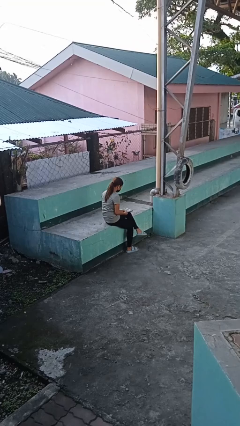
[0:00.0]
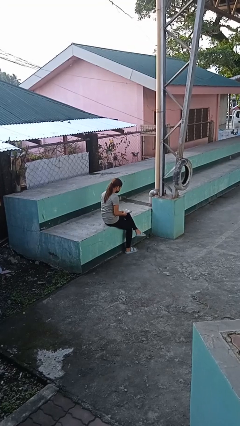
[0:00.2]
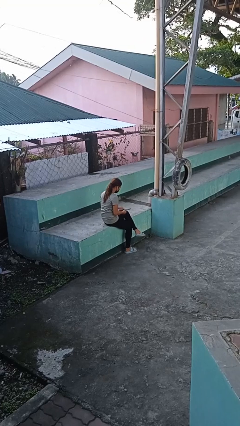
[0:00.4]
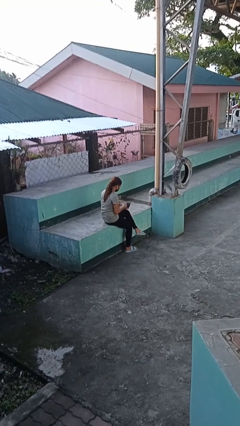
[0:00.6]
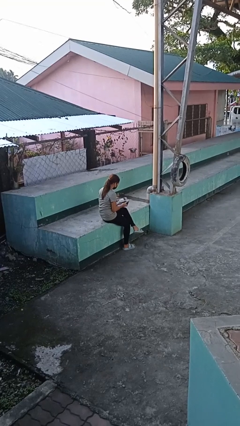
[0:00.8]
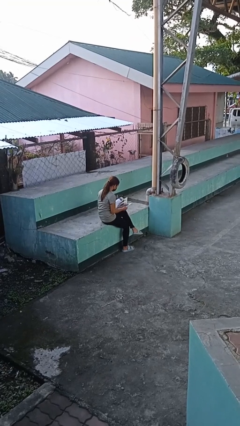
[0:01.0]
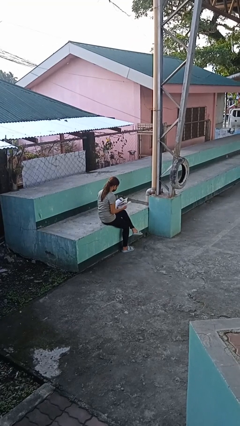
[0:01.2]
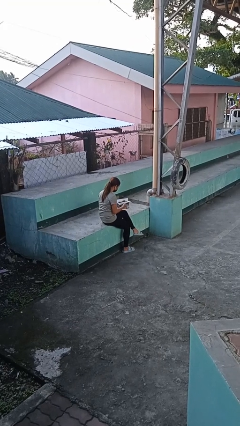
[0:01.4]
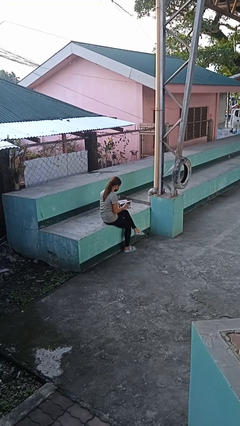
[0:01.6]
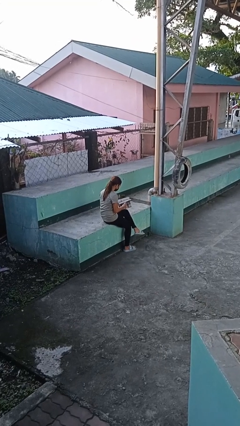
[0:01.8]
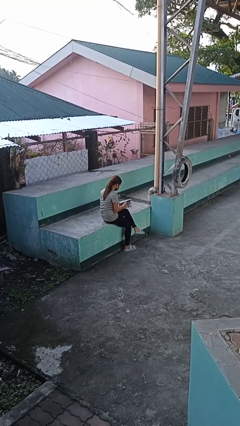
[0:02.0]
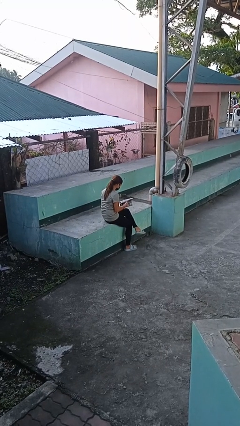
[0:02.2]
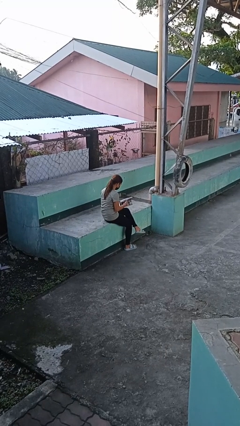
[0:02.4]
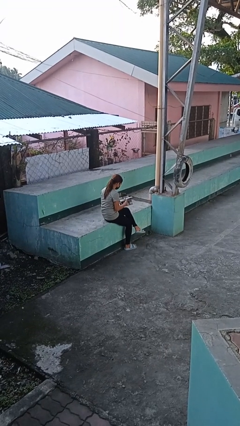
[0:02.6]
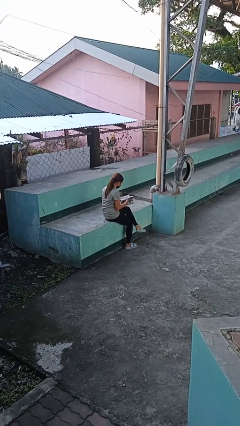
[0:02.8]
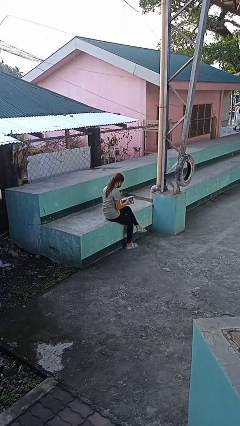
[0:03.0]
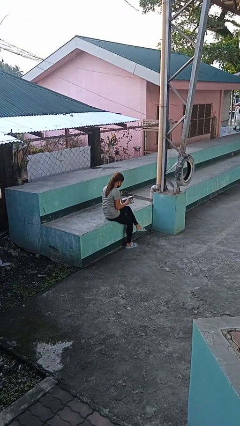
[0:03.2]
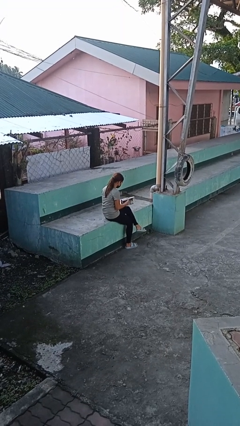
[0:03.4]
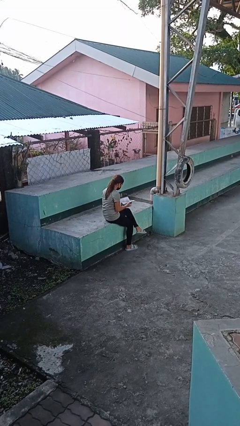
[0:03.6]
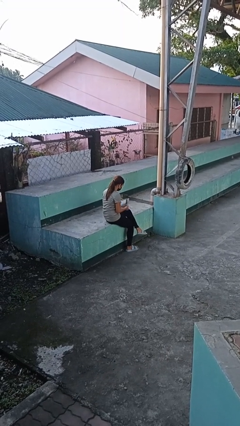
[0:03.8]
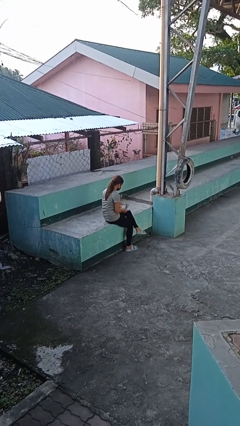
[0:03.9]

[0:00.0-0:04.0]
person reads magazine

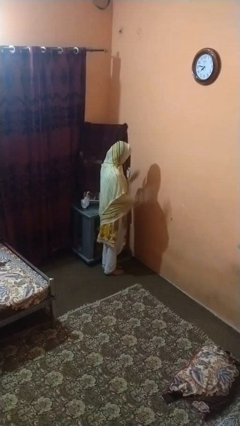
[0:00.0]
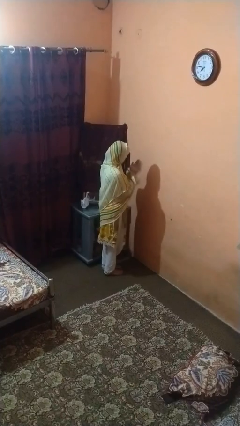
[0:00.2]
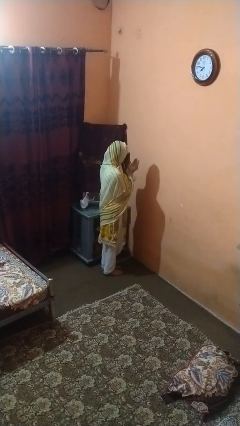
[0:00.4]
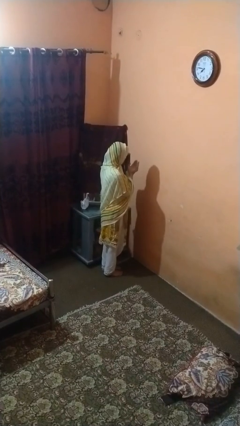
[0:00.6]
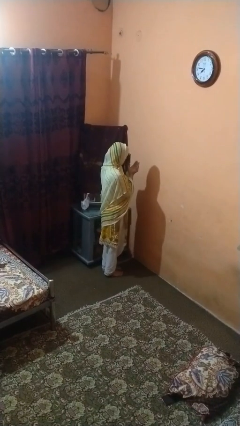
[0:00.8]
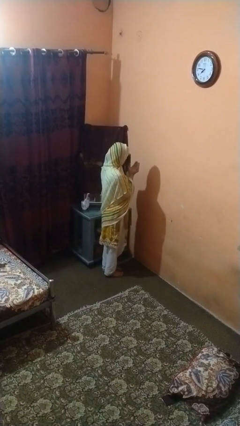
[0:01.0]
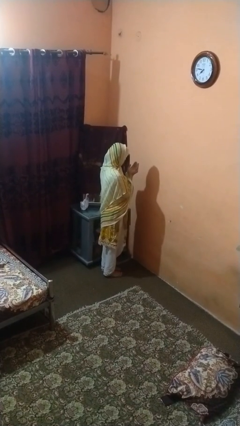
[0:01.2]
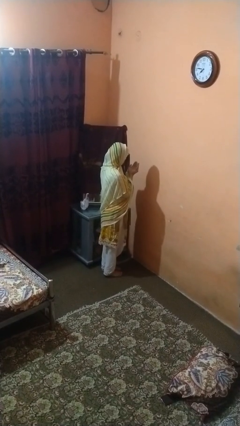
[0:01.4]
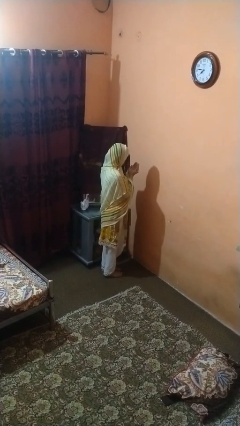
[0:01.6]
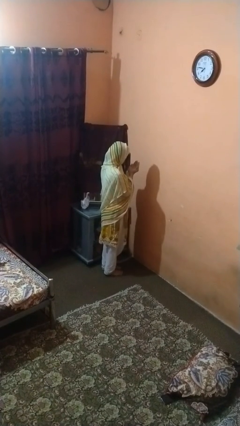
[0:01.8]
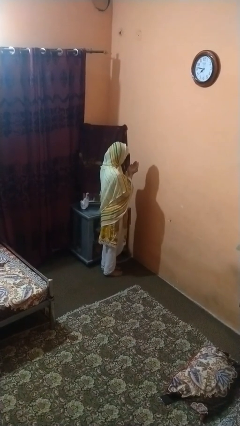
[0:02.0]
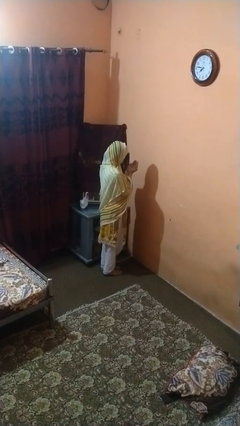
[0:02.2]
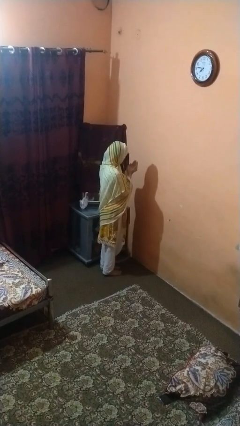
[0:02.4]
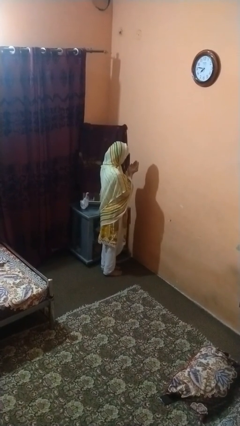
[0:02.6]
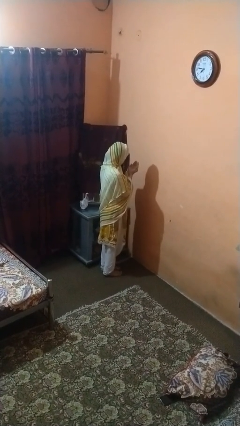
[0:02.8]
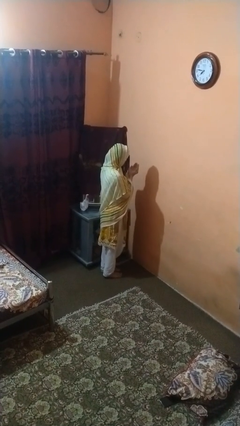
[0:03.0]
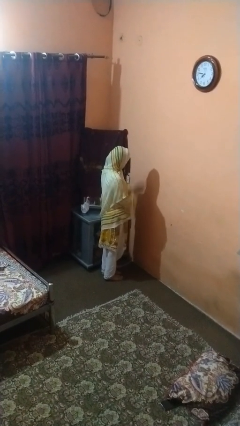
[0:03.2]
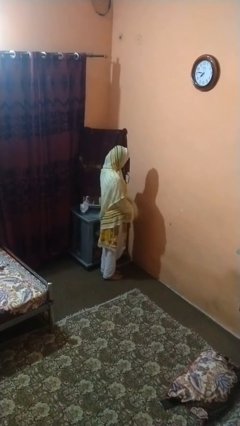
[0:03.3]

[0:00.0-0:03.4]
person prays

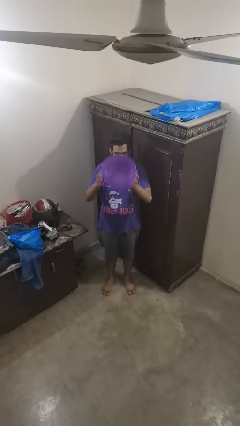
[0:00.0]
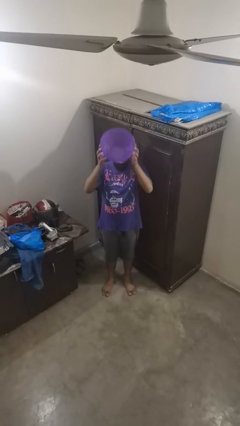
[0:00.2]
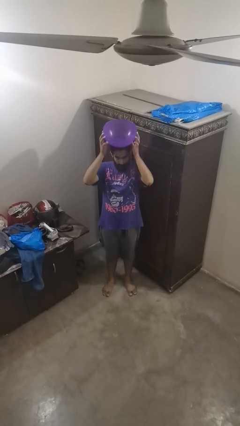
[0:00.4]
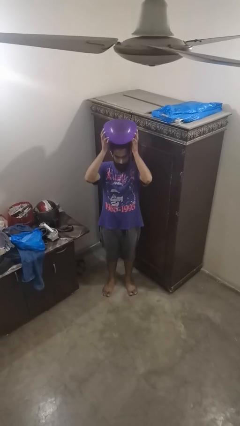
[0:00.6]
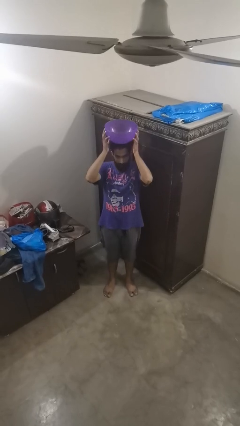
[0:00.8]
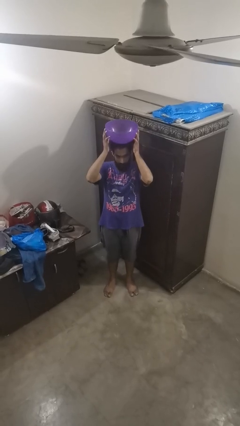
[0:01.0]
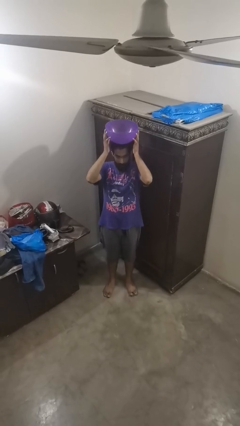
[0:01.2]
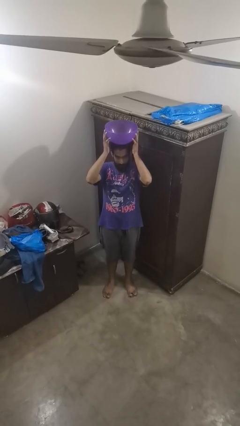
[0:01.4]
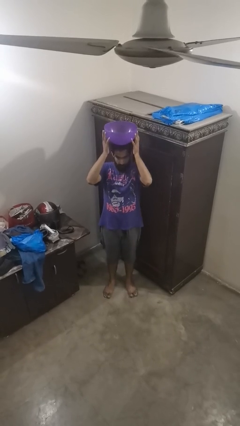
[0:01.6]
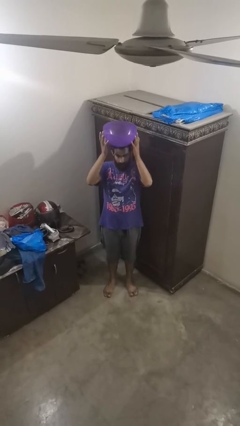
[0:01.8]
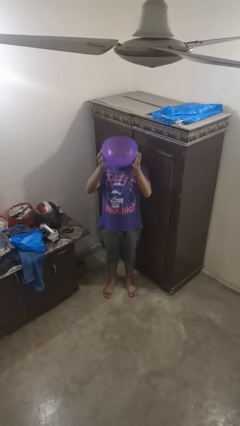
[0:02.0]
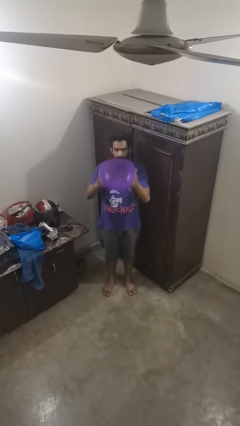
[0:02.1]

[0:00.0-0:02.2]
person holds object above head

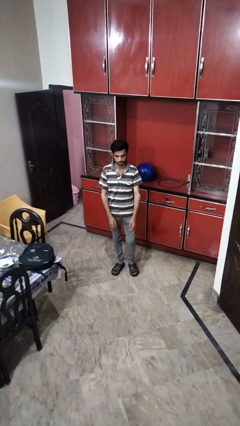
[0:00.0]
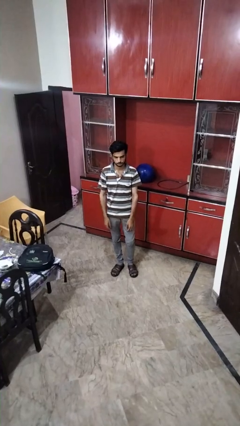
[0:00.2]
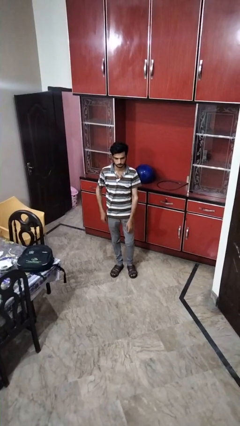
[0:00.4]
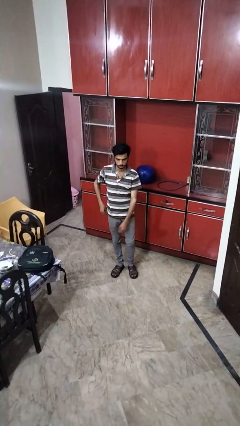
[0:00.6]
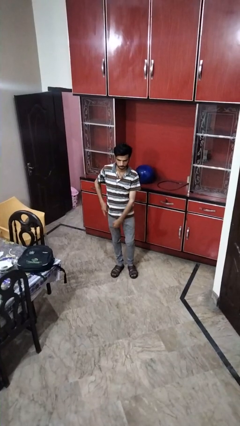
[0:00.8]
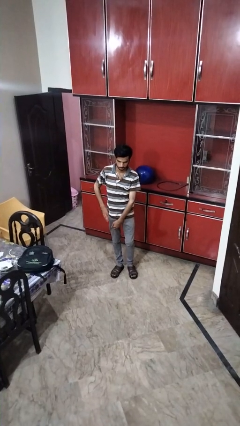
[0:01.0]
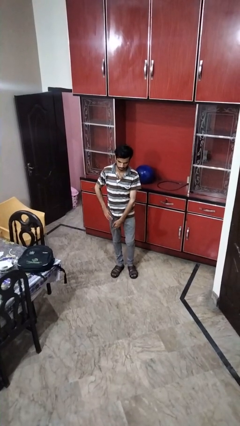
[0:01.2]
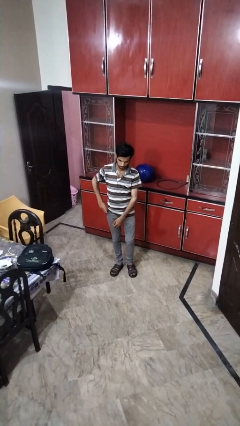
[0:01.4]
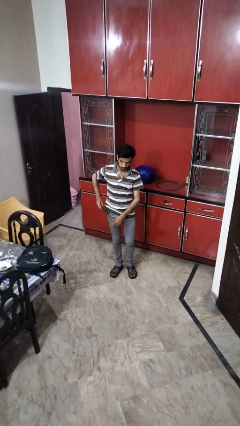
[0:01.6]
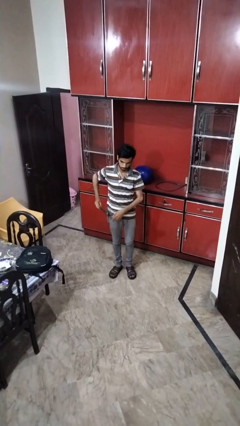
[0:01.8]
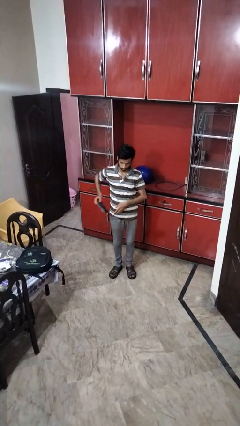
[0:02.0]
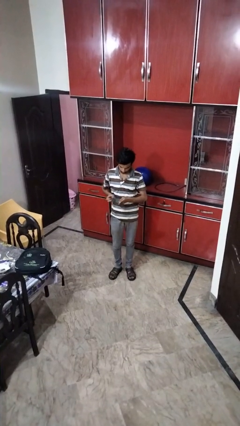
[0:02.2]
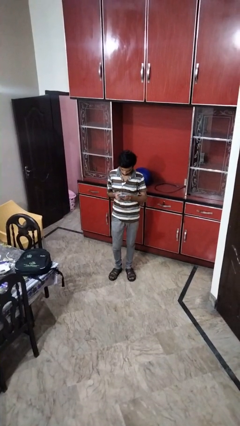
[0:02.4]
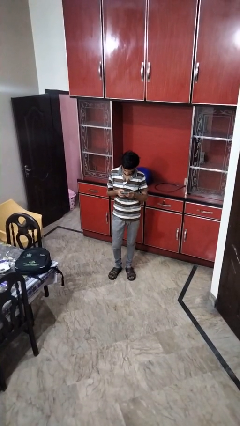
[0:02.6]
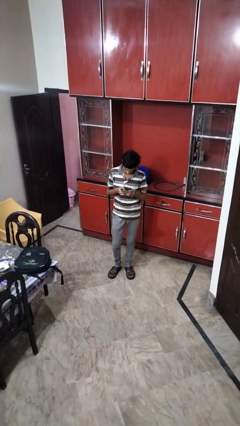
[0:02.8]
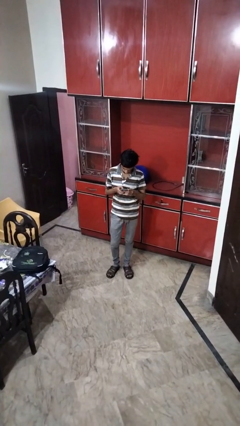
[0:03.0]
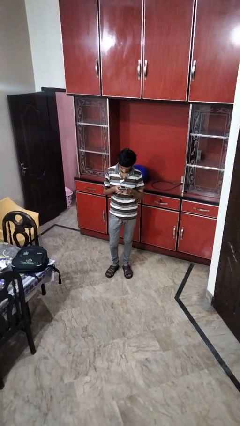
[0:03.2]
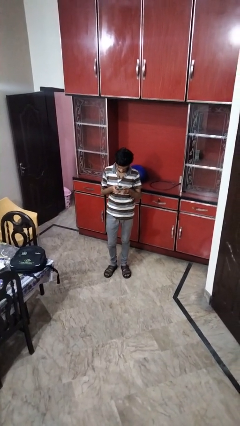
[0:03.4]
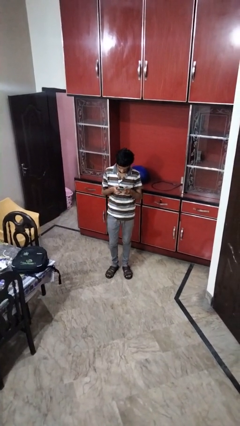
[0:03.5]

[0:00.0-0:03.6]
person takes phone from pocket

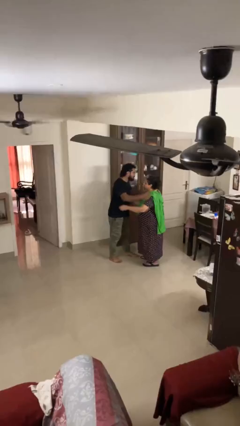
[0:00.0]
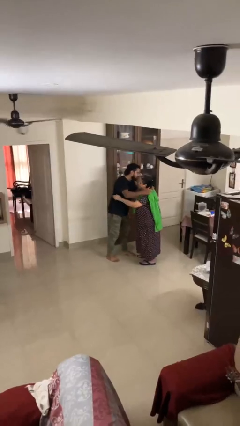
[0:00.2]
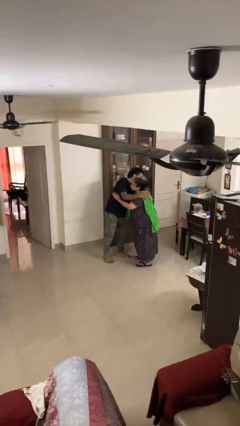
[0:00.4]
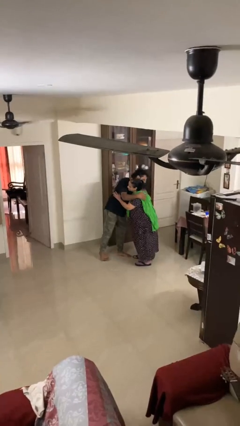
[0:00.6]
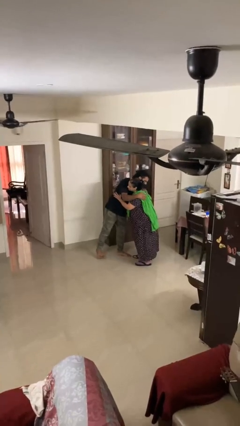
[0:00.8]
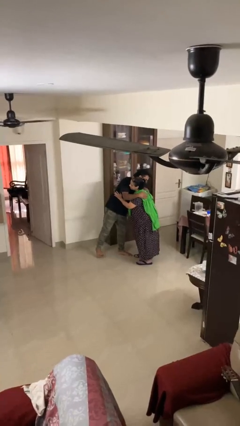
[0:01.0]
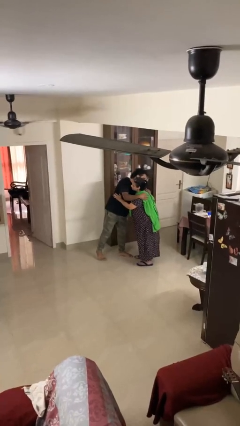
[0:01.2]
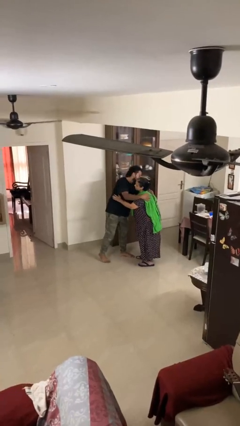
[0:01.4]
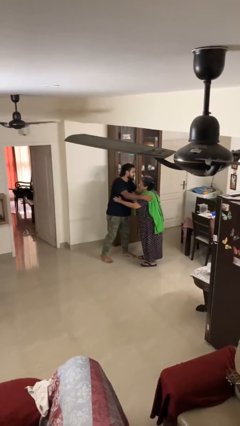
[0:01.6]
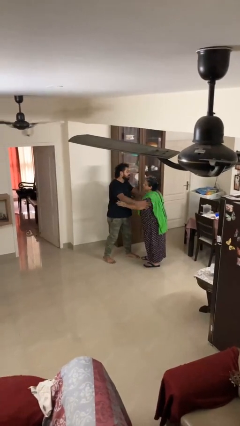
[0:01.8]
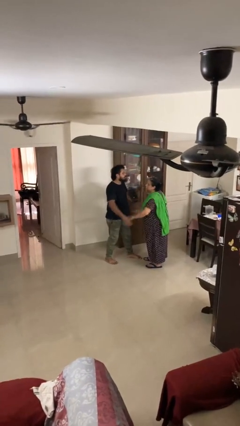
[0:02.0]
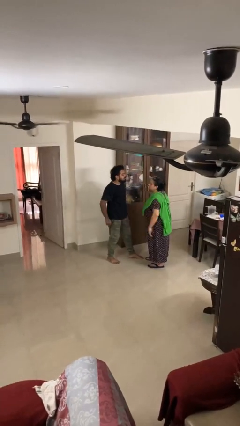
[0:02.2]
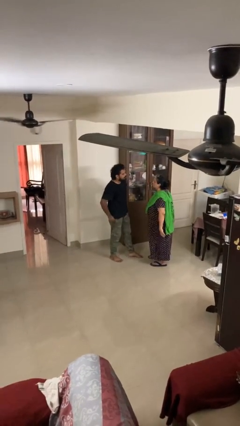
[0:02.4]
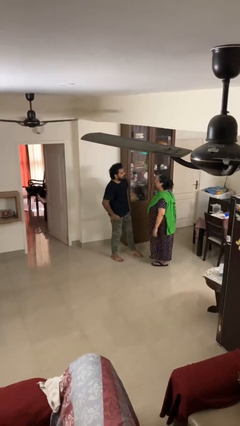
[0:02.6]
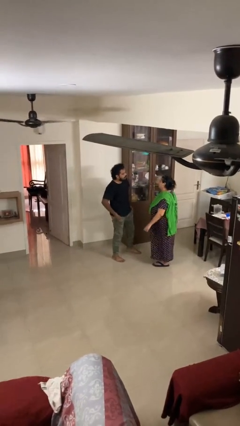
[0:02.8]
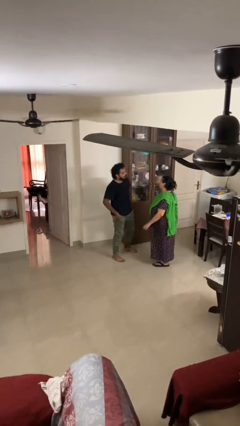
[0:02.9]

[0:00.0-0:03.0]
person embraces person

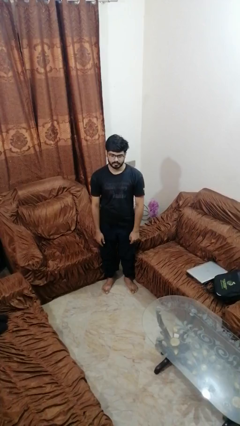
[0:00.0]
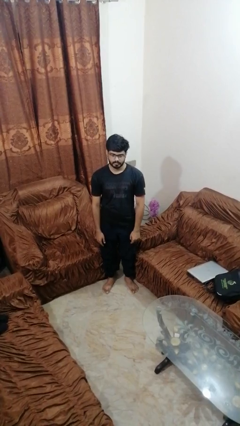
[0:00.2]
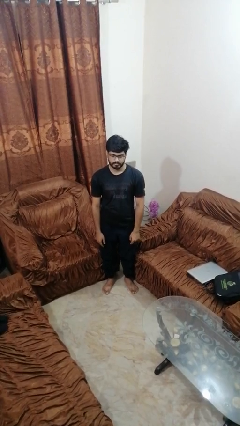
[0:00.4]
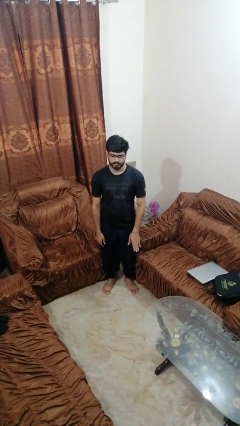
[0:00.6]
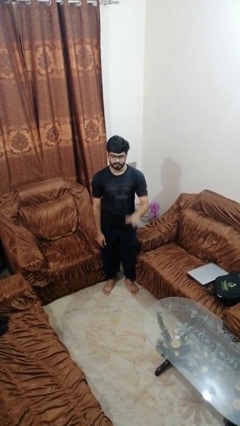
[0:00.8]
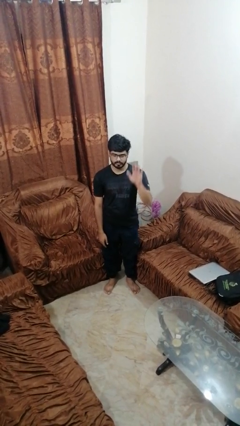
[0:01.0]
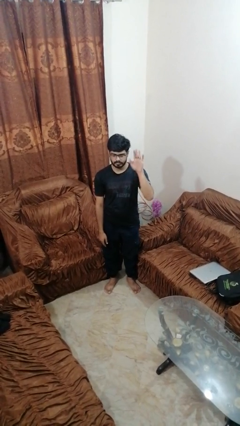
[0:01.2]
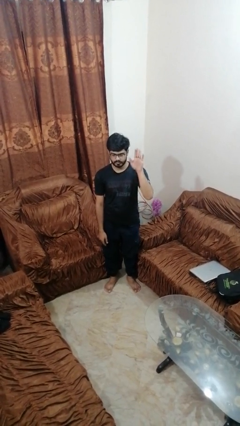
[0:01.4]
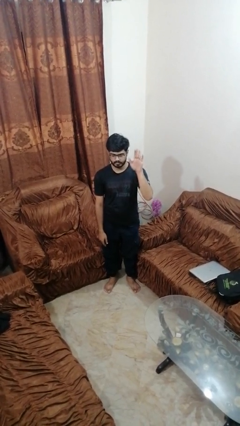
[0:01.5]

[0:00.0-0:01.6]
person gestures raise hand
